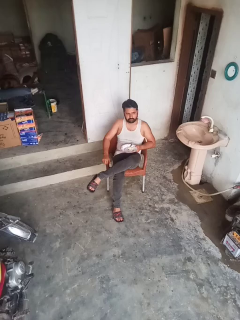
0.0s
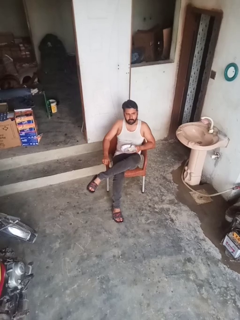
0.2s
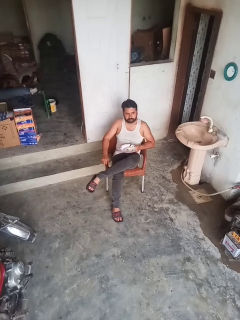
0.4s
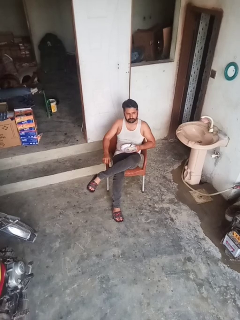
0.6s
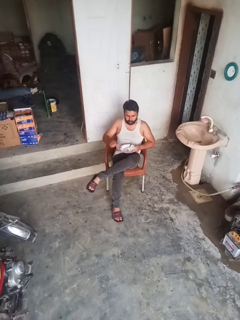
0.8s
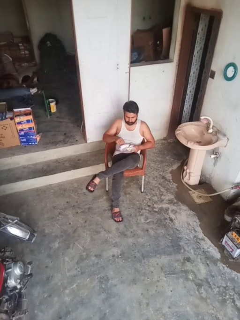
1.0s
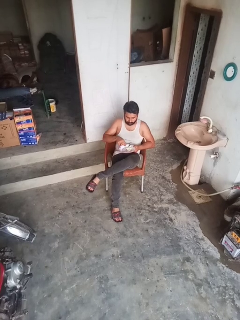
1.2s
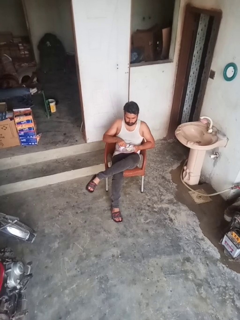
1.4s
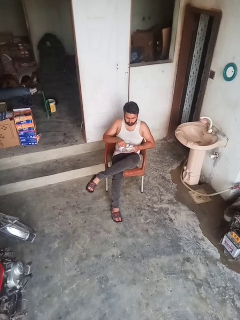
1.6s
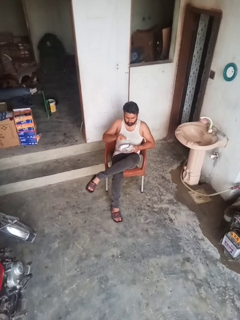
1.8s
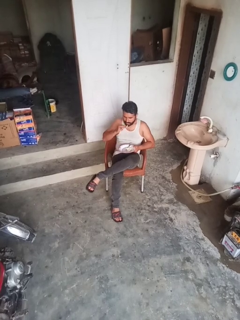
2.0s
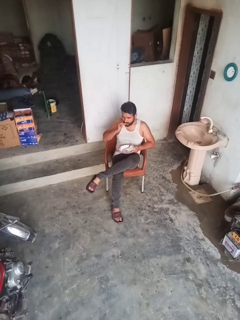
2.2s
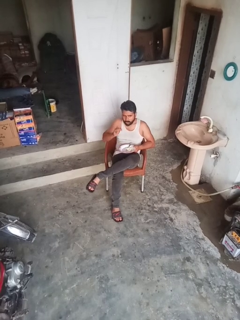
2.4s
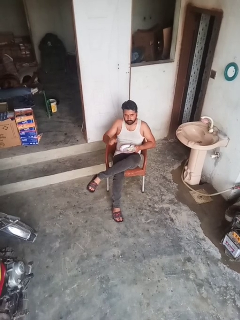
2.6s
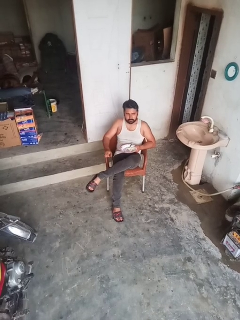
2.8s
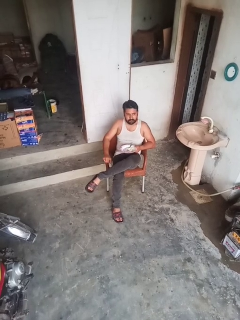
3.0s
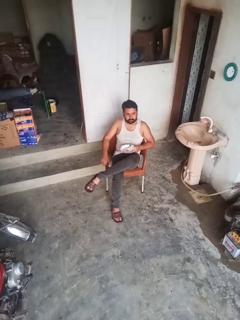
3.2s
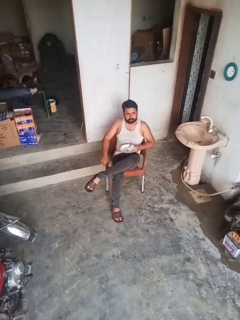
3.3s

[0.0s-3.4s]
person eats with hands

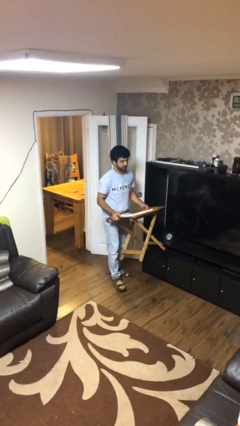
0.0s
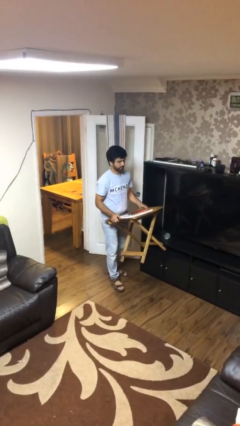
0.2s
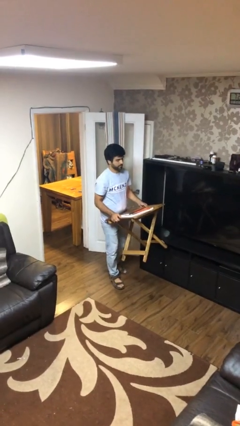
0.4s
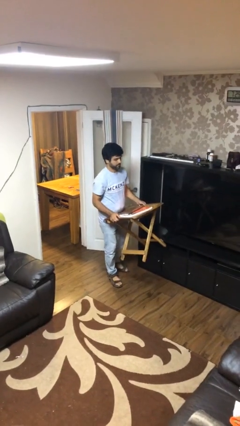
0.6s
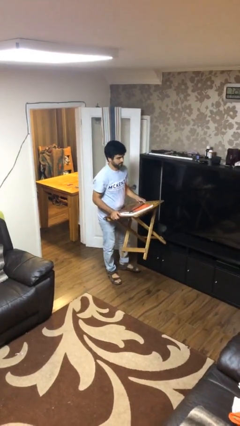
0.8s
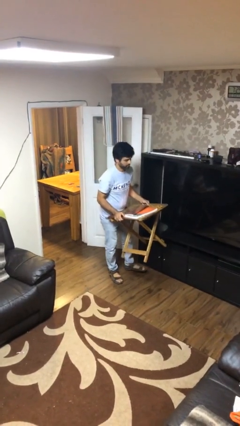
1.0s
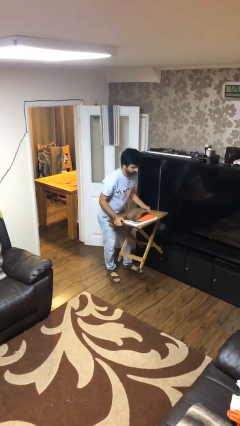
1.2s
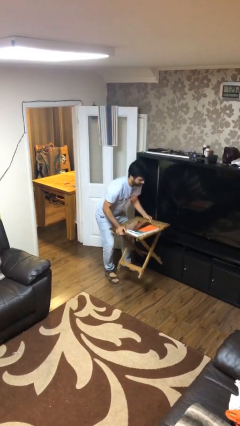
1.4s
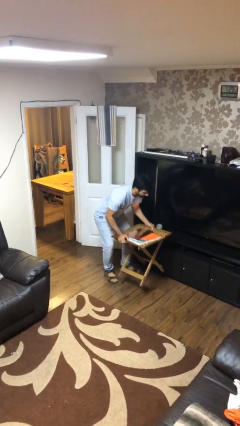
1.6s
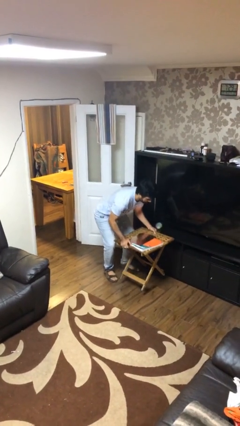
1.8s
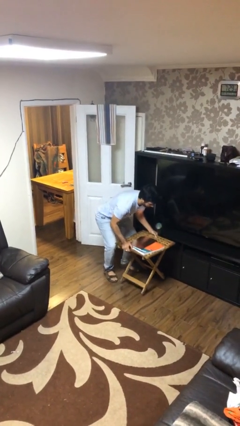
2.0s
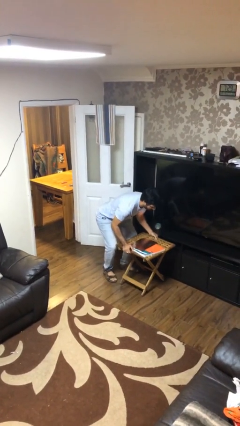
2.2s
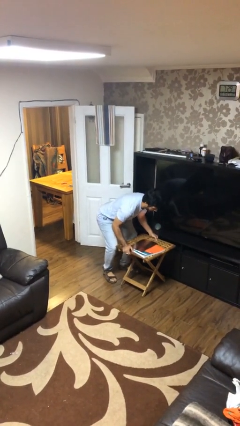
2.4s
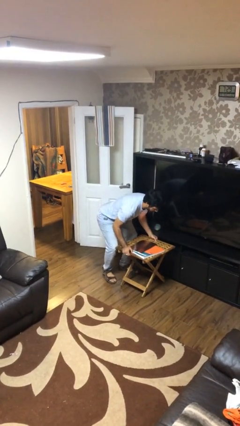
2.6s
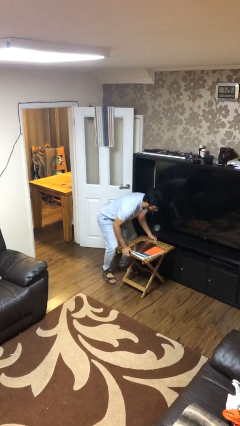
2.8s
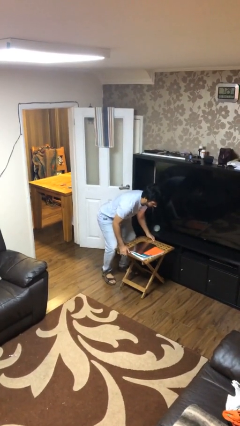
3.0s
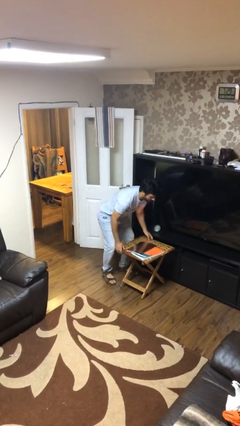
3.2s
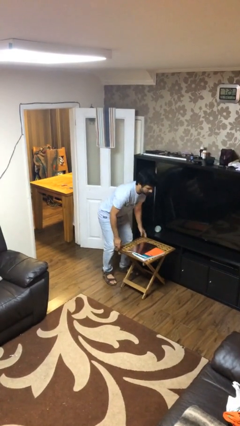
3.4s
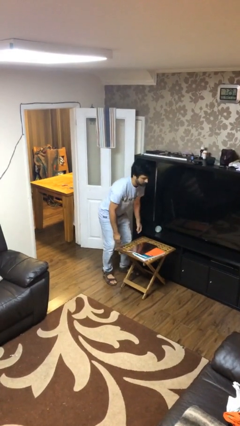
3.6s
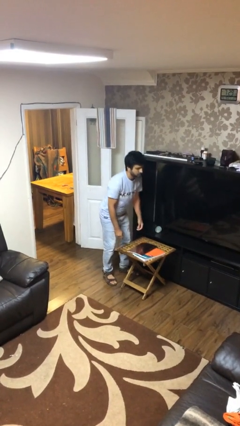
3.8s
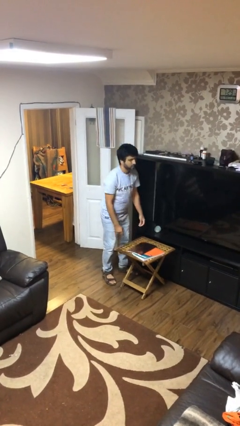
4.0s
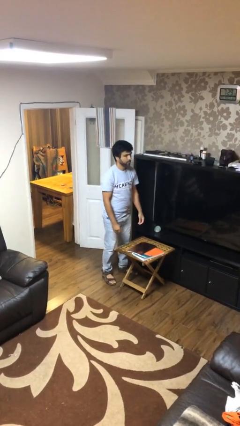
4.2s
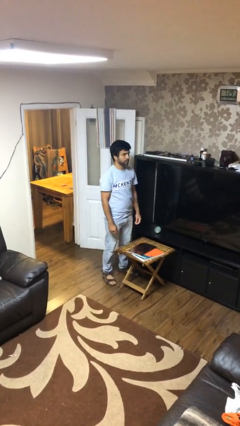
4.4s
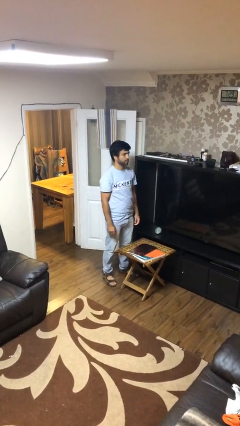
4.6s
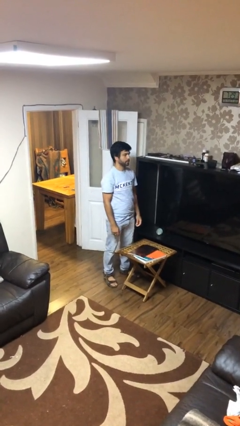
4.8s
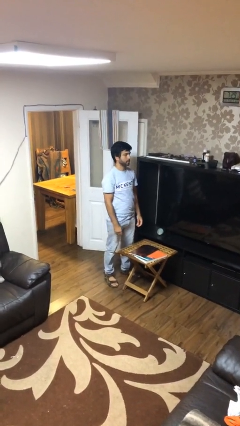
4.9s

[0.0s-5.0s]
person puts down object on floor

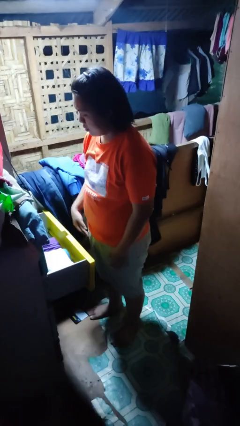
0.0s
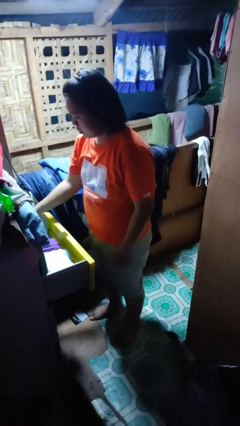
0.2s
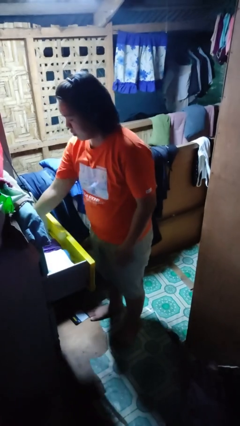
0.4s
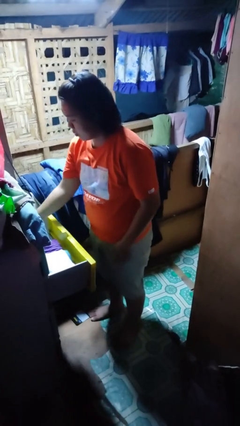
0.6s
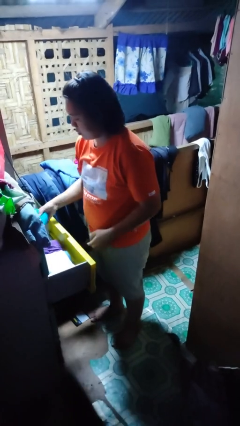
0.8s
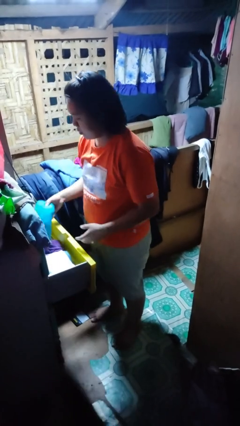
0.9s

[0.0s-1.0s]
person takes clothes from dresser

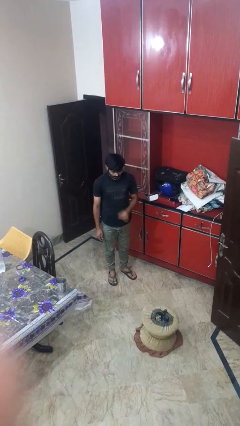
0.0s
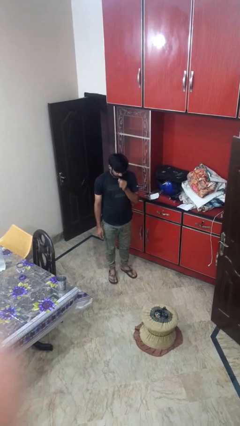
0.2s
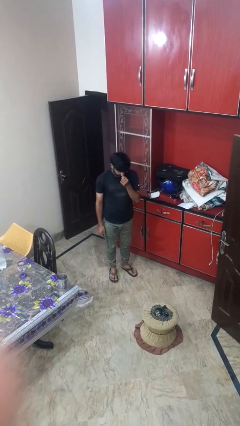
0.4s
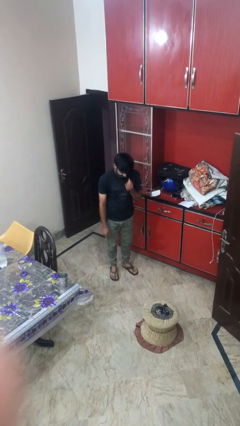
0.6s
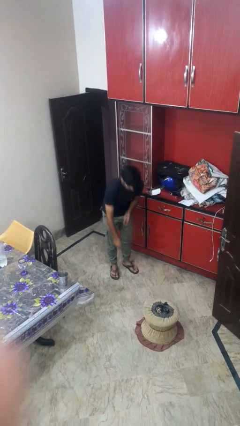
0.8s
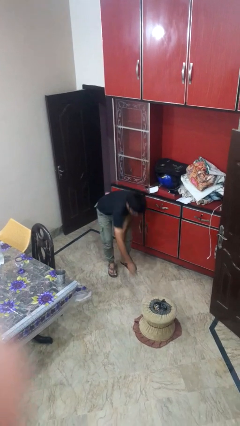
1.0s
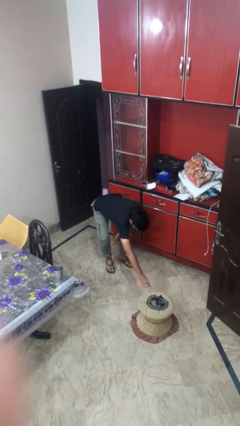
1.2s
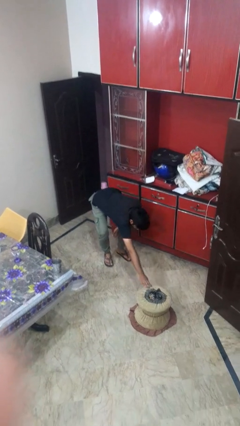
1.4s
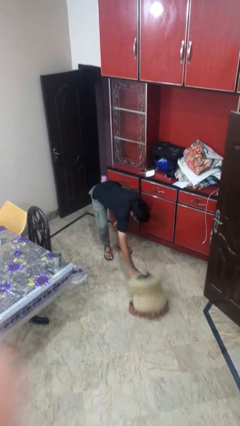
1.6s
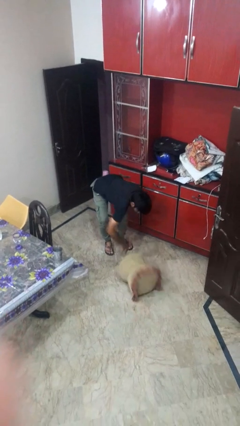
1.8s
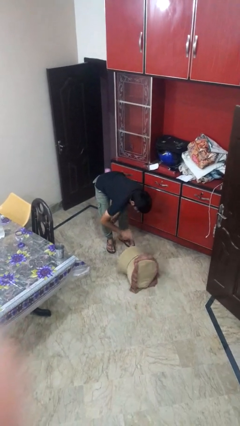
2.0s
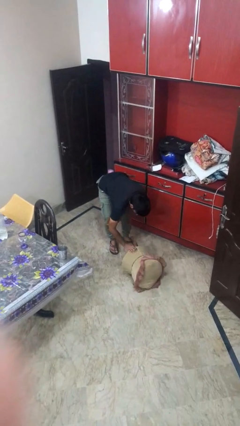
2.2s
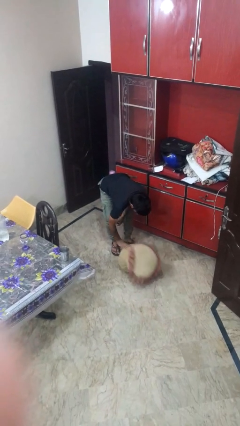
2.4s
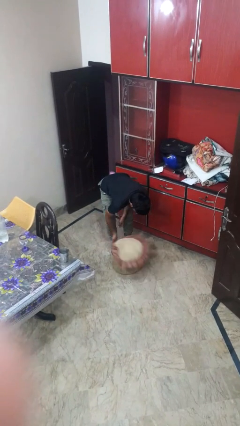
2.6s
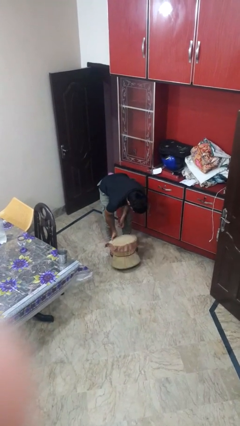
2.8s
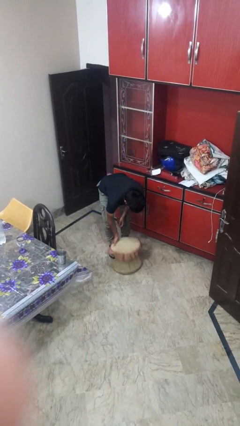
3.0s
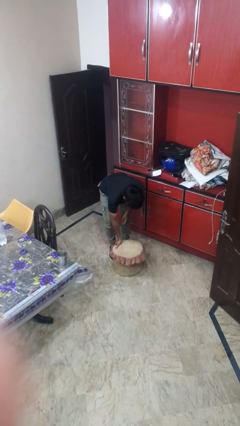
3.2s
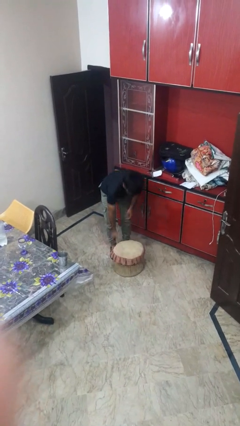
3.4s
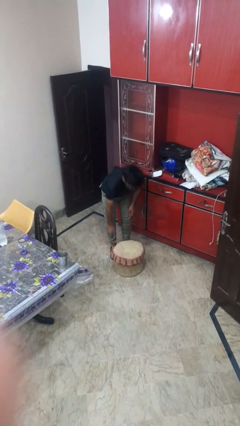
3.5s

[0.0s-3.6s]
person sets upright furniture

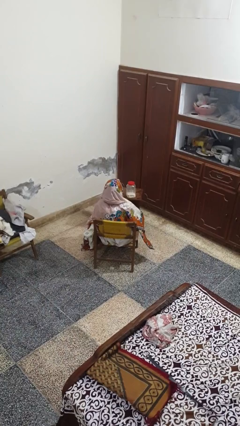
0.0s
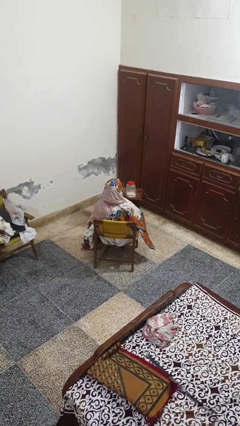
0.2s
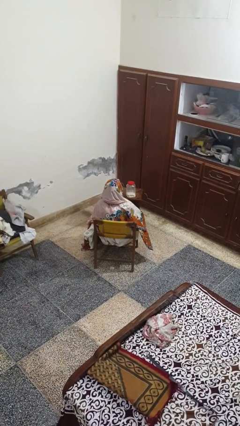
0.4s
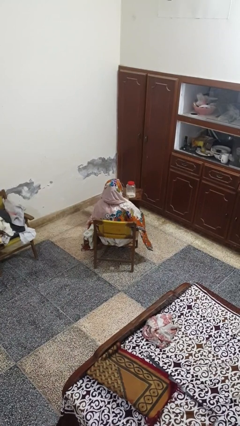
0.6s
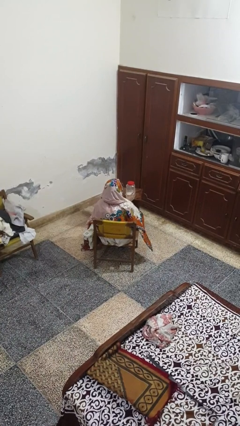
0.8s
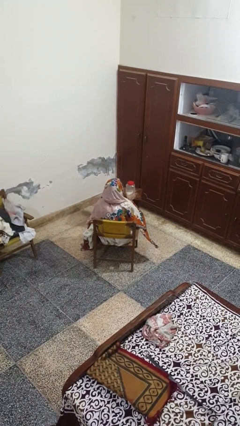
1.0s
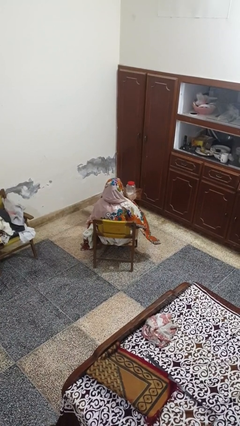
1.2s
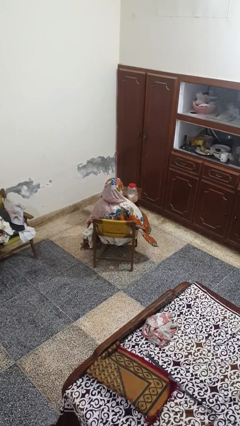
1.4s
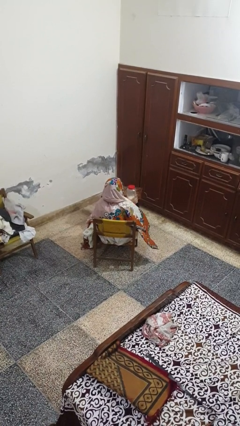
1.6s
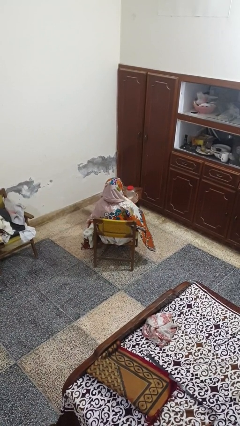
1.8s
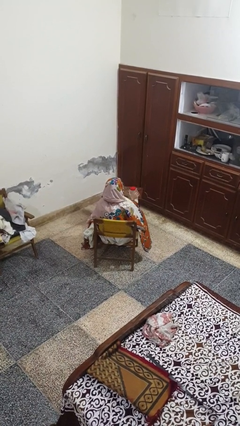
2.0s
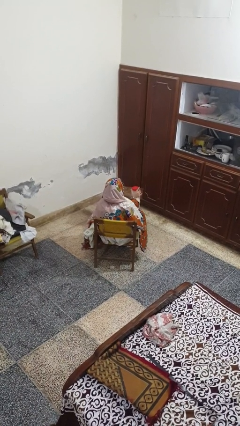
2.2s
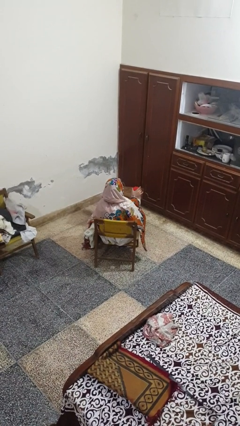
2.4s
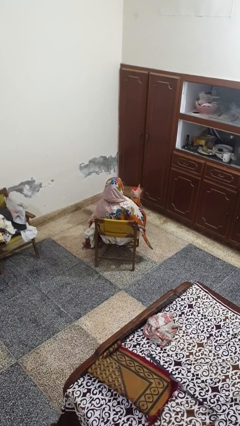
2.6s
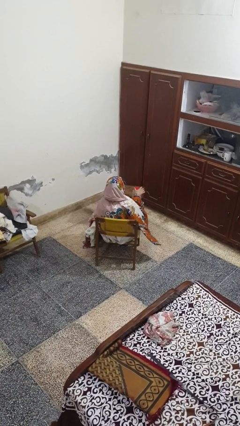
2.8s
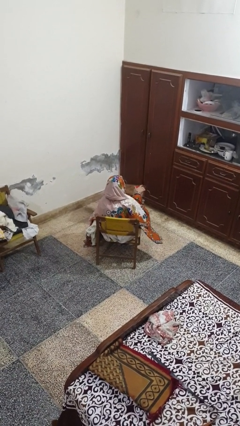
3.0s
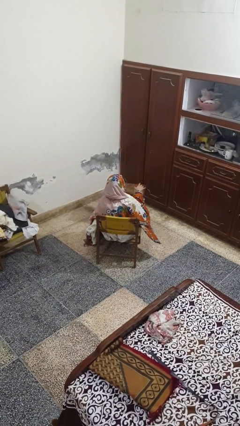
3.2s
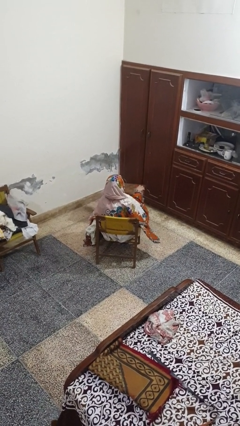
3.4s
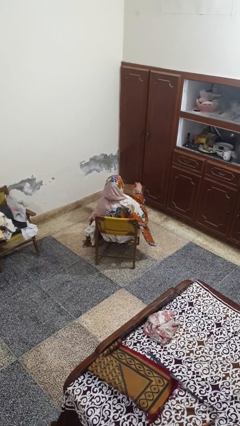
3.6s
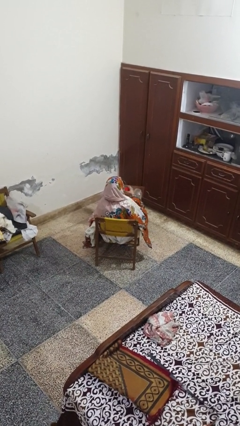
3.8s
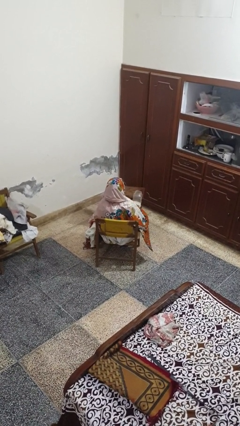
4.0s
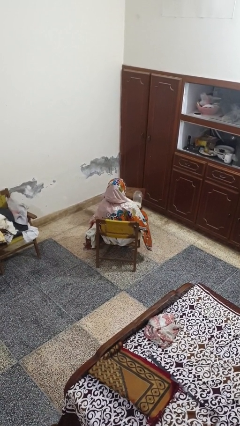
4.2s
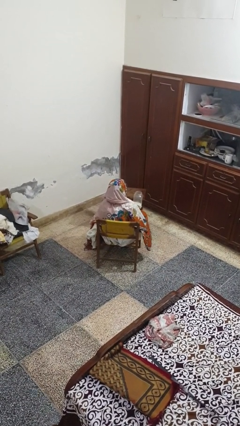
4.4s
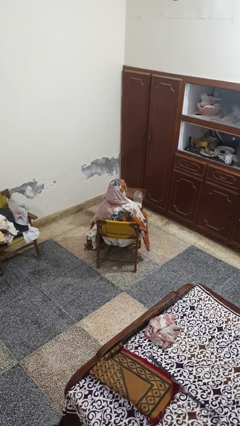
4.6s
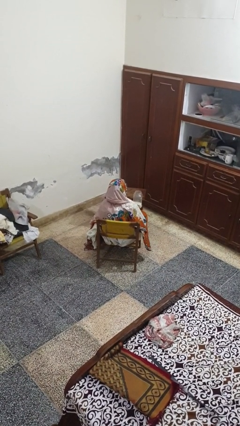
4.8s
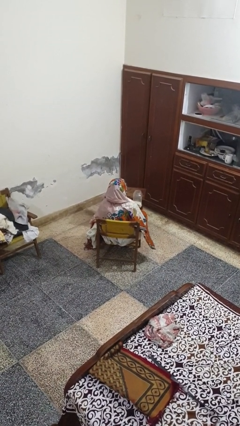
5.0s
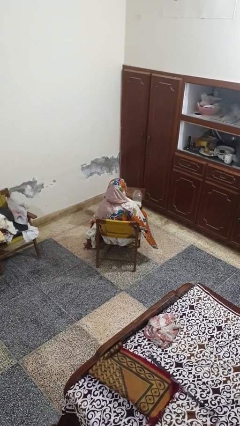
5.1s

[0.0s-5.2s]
person opens jar

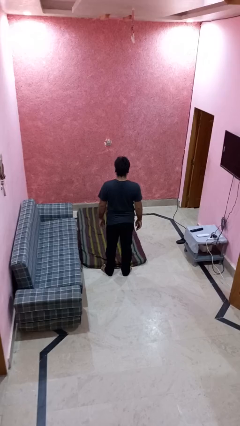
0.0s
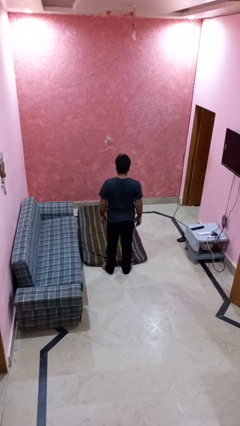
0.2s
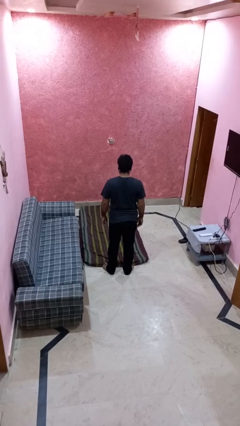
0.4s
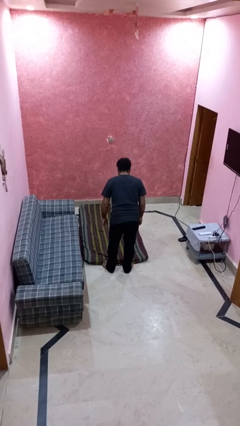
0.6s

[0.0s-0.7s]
person somersaults
